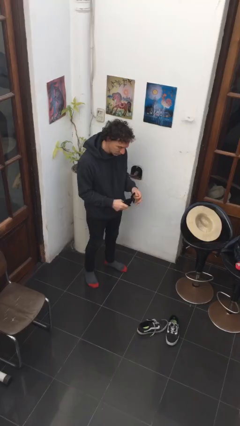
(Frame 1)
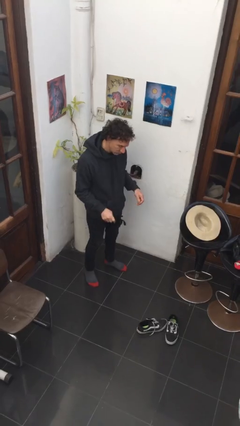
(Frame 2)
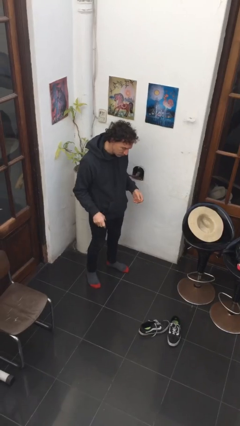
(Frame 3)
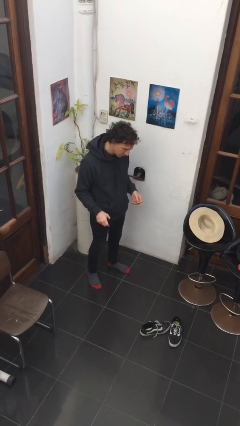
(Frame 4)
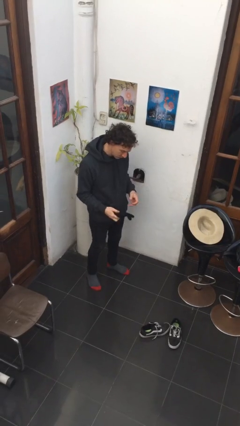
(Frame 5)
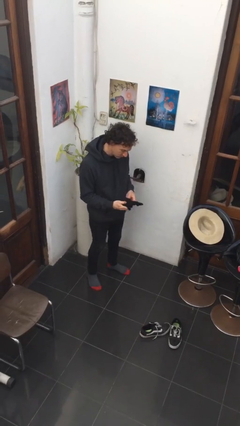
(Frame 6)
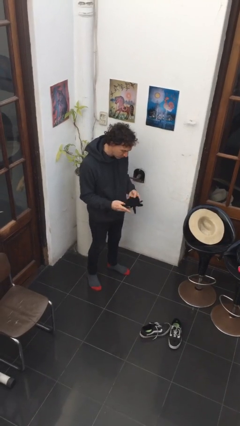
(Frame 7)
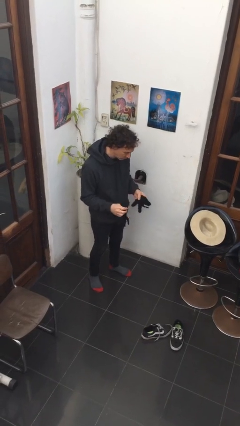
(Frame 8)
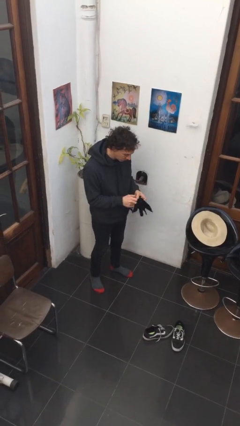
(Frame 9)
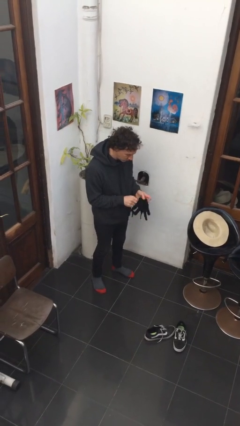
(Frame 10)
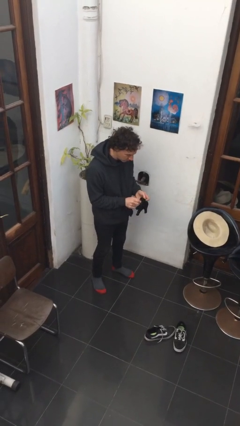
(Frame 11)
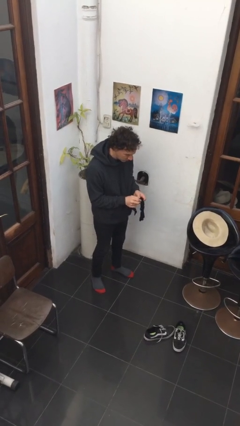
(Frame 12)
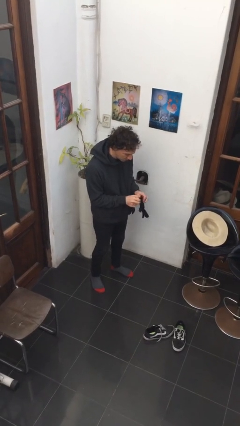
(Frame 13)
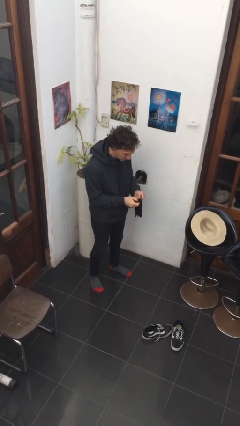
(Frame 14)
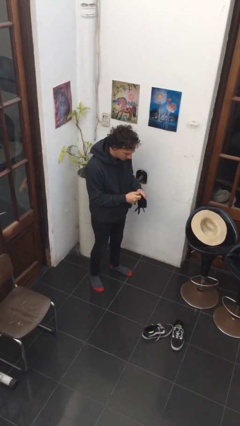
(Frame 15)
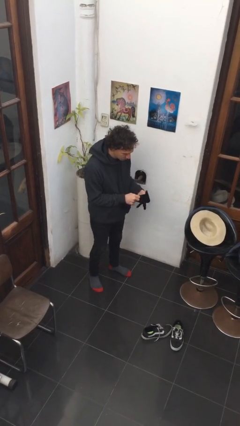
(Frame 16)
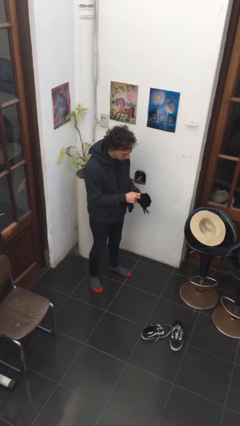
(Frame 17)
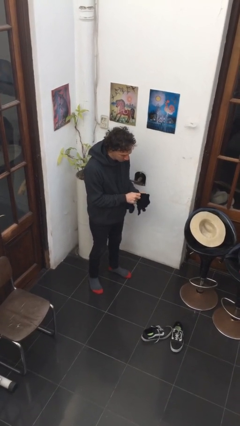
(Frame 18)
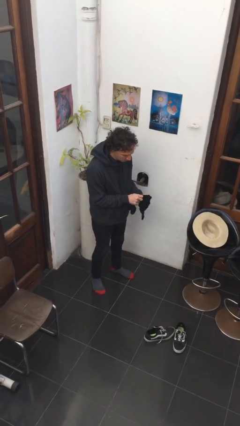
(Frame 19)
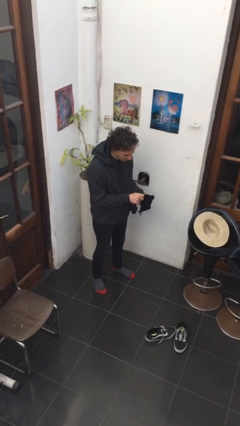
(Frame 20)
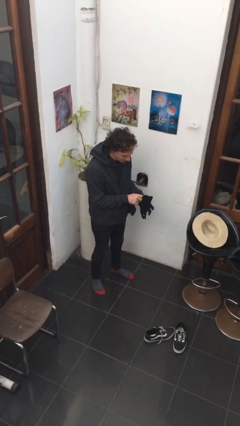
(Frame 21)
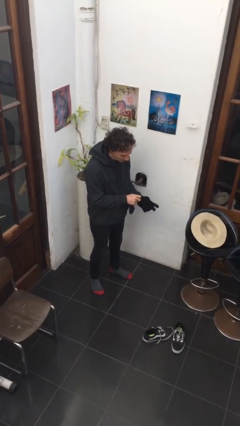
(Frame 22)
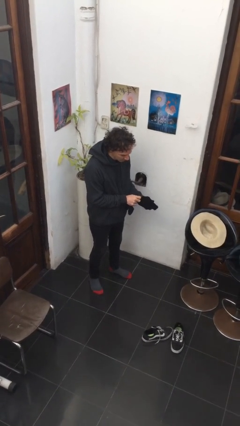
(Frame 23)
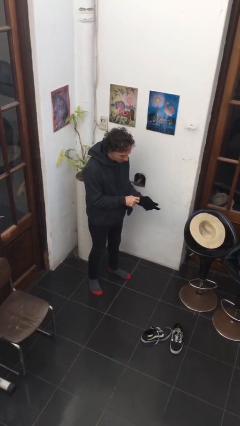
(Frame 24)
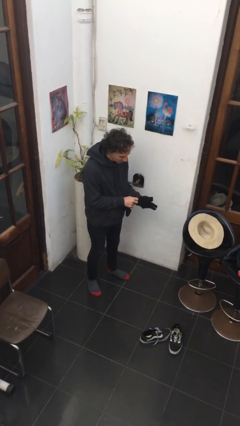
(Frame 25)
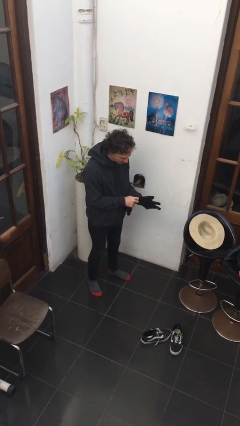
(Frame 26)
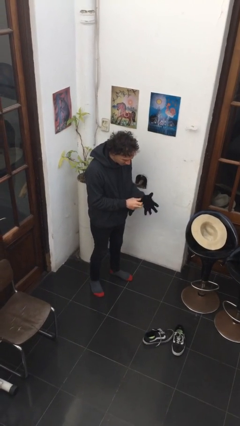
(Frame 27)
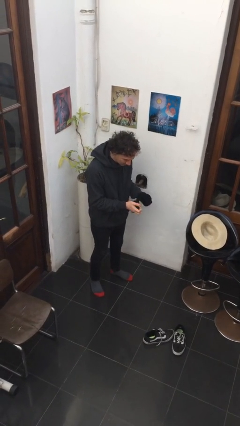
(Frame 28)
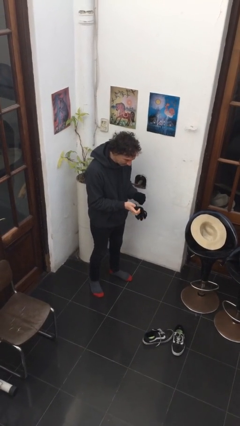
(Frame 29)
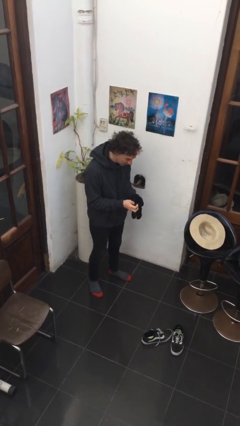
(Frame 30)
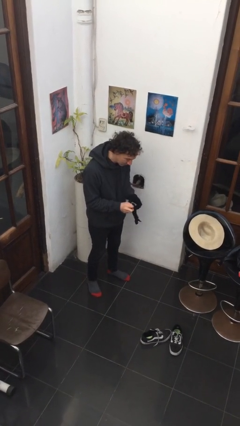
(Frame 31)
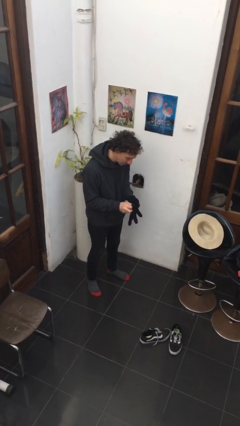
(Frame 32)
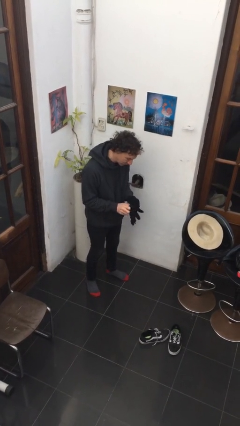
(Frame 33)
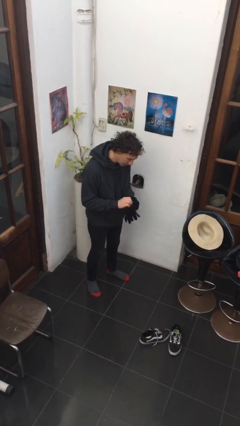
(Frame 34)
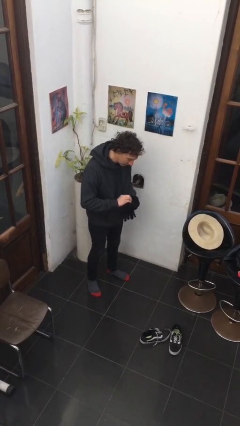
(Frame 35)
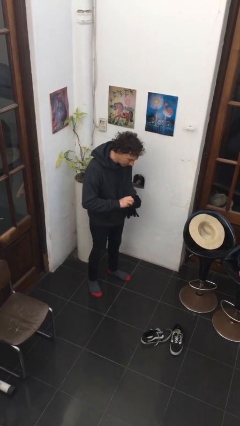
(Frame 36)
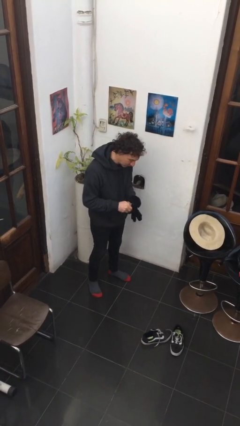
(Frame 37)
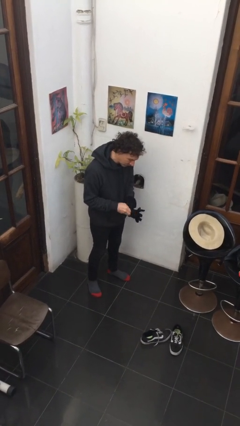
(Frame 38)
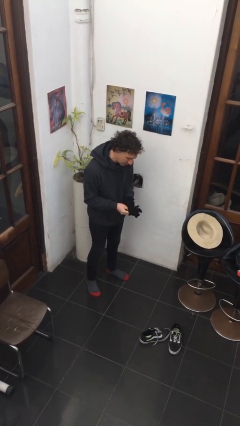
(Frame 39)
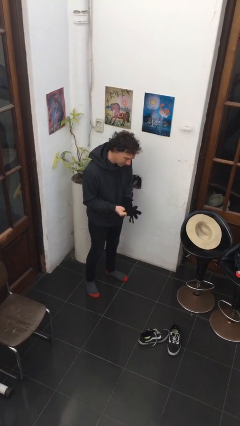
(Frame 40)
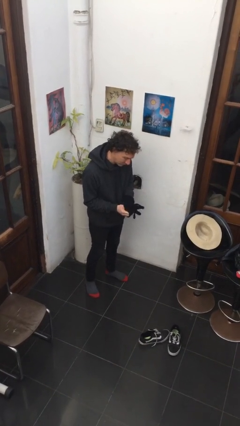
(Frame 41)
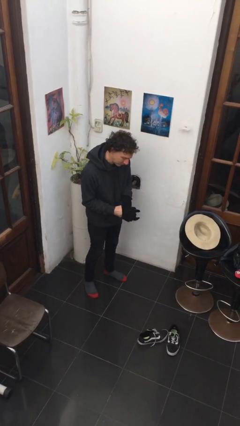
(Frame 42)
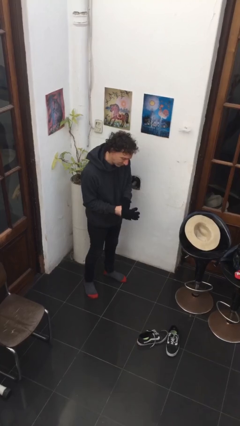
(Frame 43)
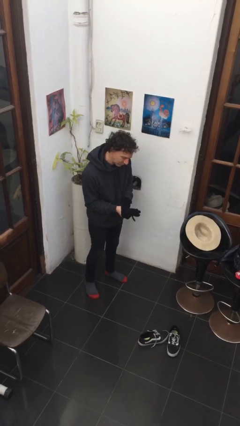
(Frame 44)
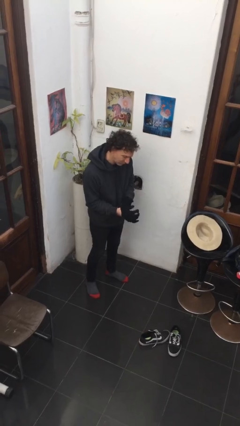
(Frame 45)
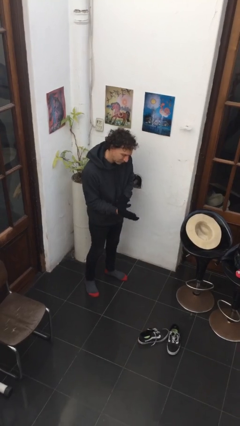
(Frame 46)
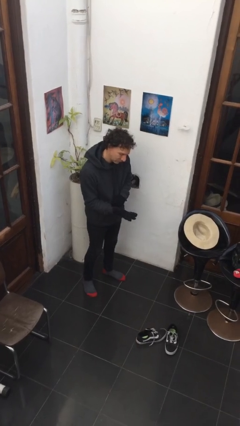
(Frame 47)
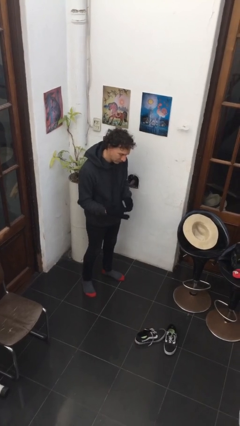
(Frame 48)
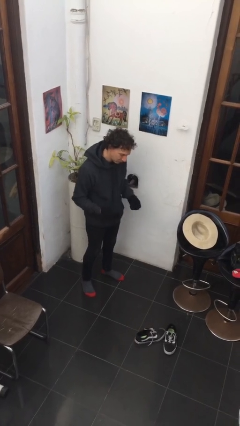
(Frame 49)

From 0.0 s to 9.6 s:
person puts on gloves

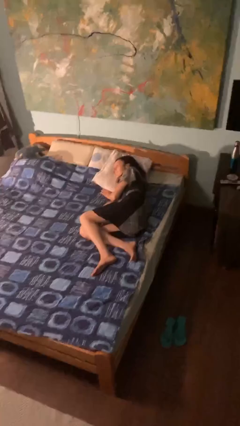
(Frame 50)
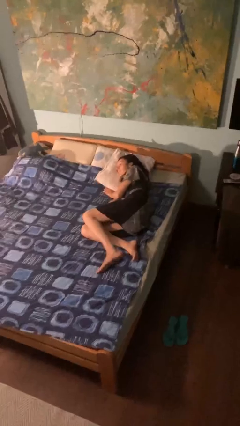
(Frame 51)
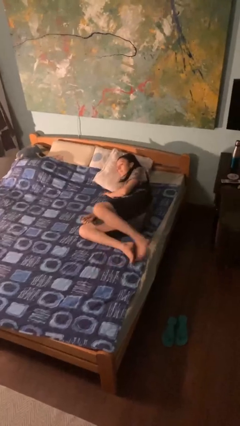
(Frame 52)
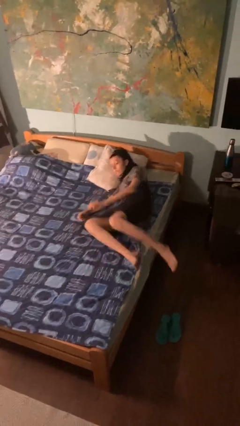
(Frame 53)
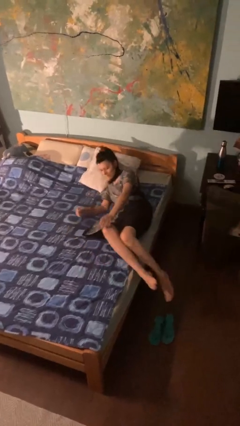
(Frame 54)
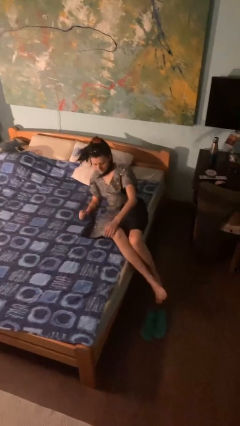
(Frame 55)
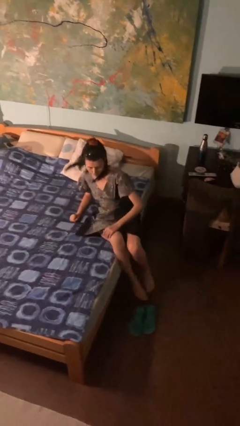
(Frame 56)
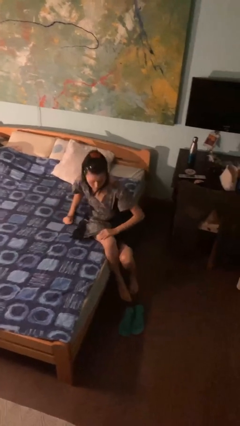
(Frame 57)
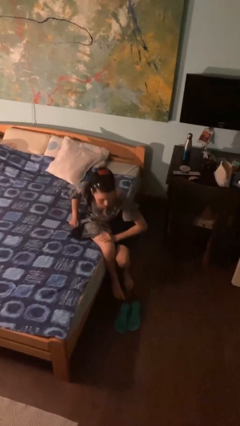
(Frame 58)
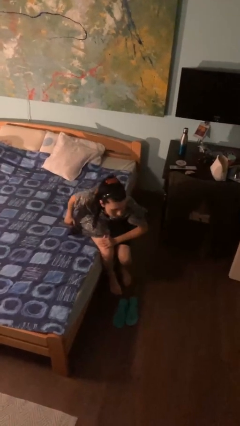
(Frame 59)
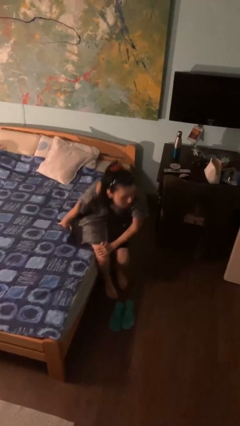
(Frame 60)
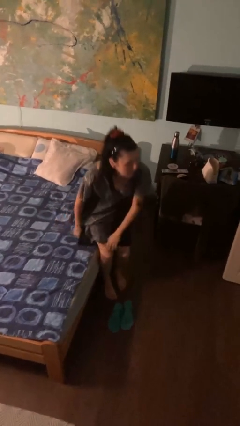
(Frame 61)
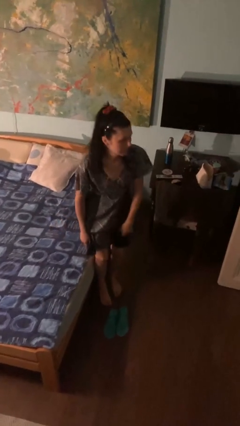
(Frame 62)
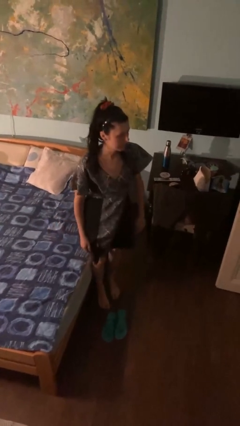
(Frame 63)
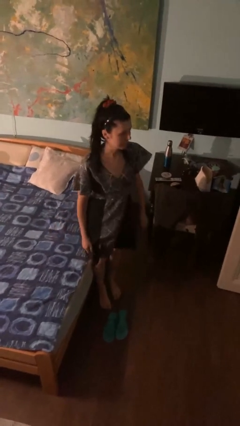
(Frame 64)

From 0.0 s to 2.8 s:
person stands up

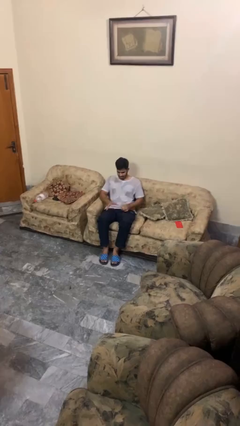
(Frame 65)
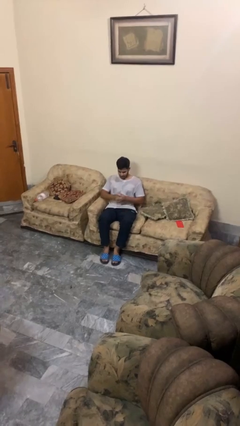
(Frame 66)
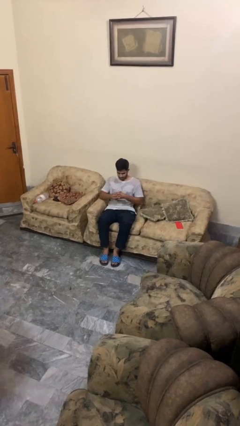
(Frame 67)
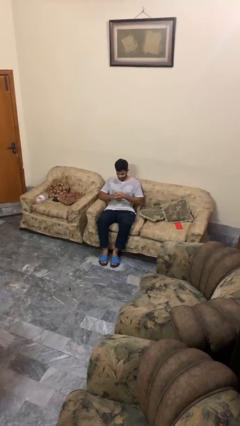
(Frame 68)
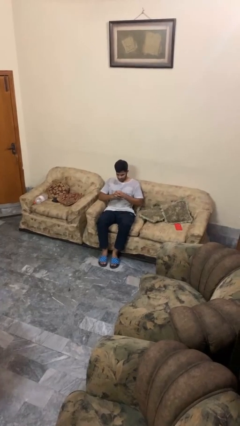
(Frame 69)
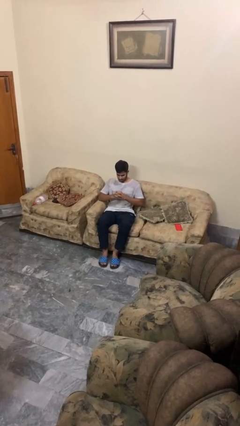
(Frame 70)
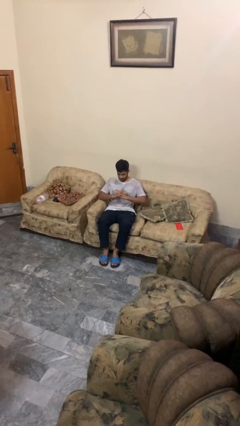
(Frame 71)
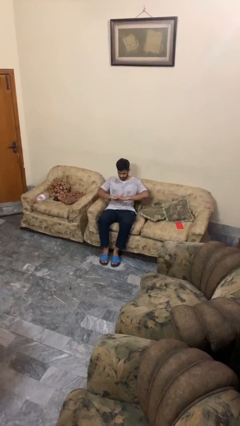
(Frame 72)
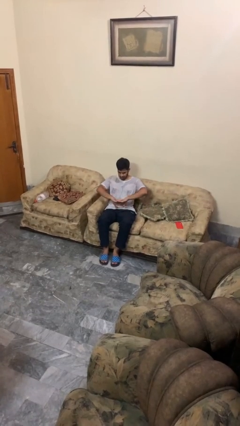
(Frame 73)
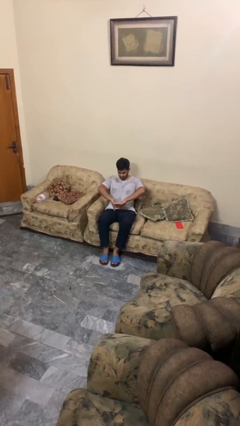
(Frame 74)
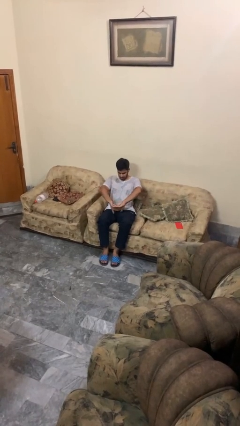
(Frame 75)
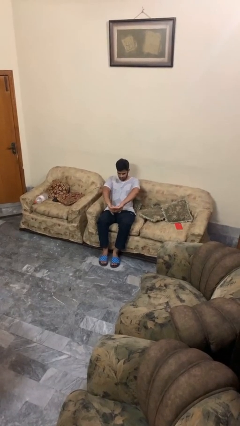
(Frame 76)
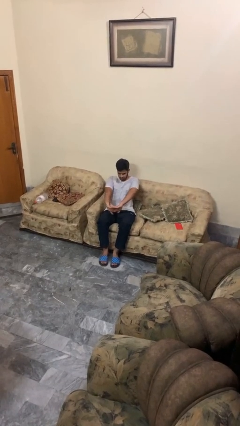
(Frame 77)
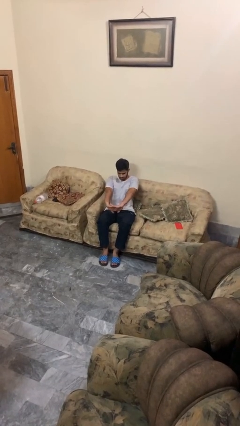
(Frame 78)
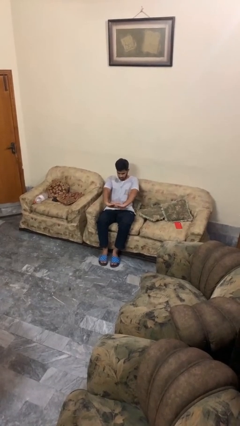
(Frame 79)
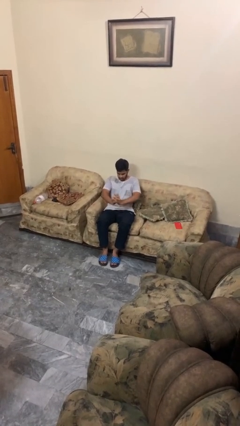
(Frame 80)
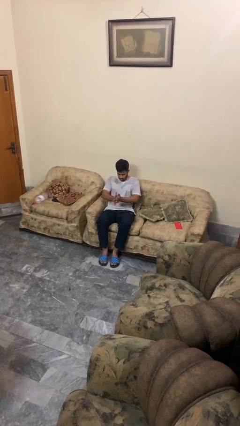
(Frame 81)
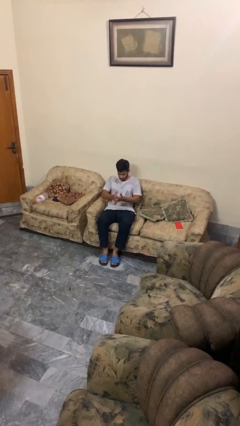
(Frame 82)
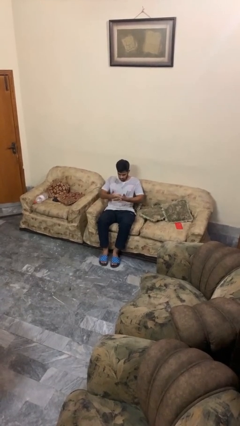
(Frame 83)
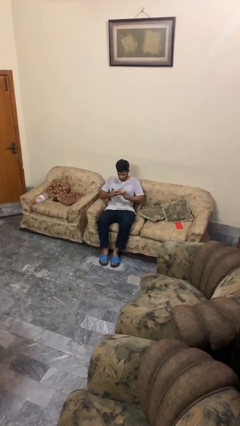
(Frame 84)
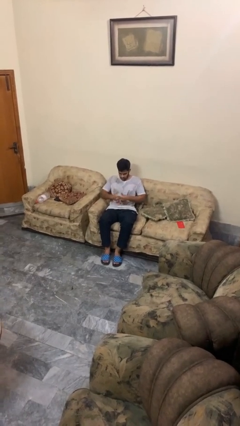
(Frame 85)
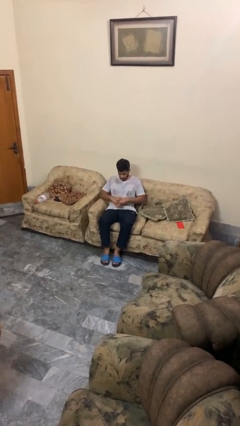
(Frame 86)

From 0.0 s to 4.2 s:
person cracks knuckles

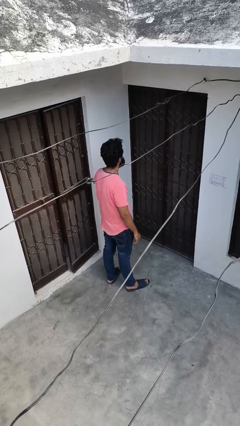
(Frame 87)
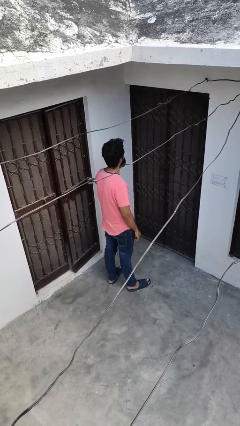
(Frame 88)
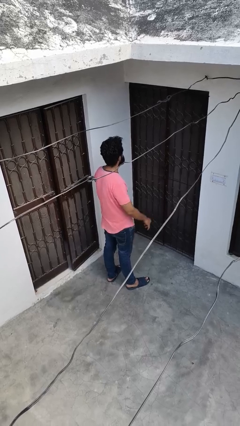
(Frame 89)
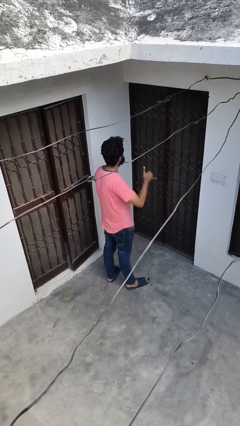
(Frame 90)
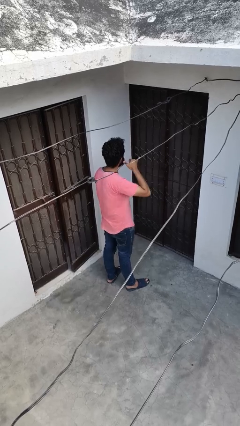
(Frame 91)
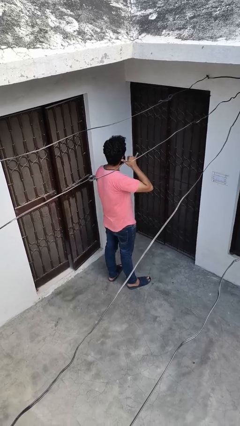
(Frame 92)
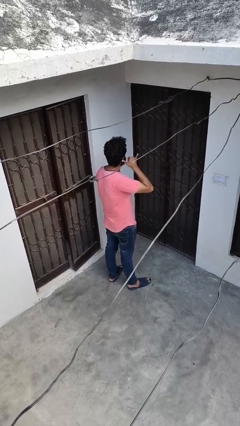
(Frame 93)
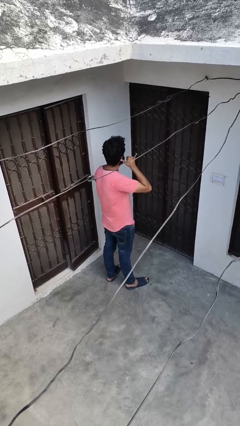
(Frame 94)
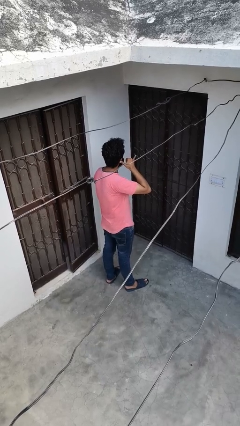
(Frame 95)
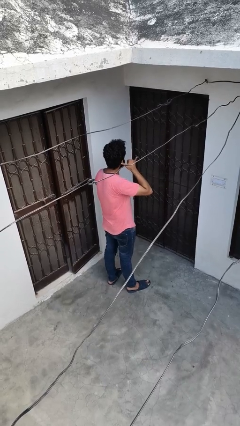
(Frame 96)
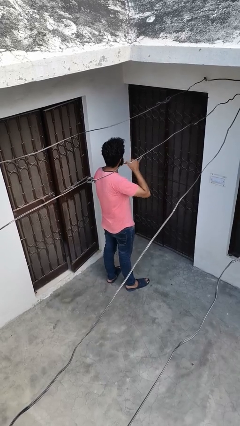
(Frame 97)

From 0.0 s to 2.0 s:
person gestures call me
